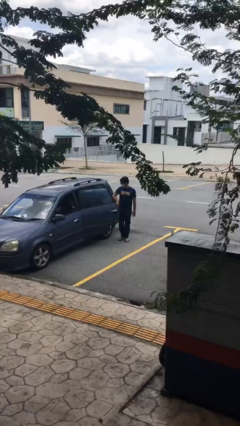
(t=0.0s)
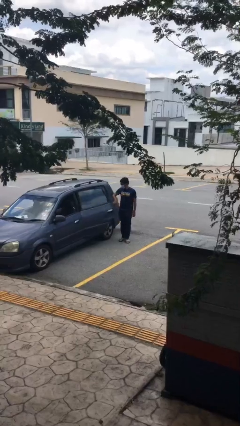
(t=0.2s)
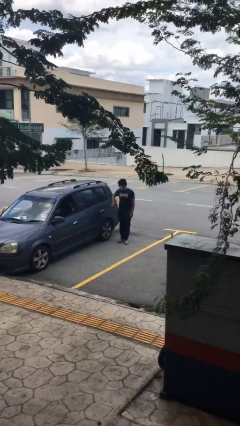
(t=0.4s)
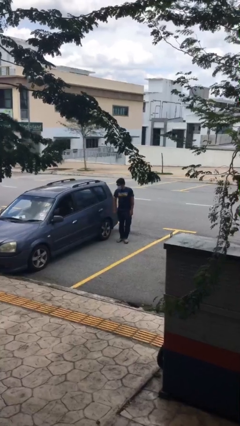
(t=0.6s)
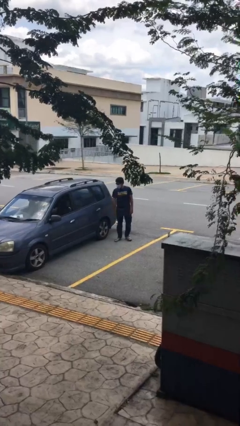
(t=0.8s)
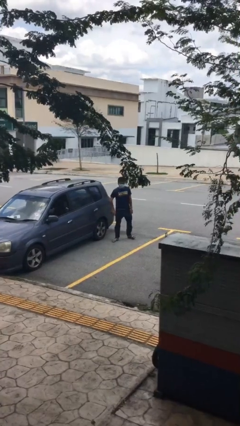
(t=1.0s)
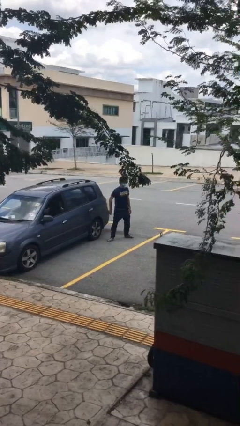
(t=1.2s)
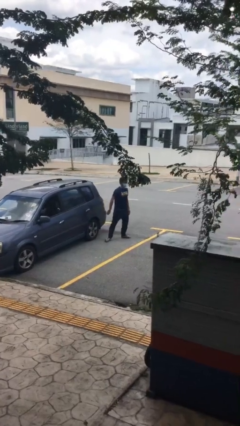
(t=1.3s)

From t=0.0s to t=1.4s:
person closes car door

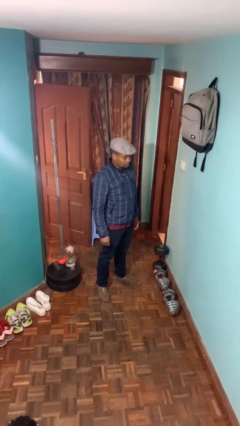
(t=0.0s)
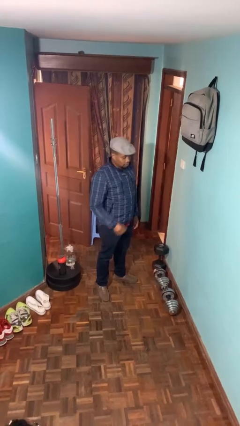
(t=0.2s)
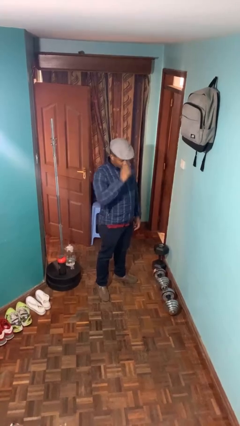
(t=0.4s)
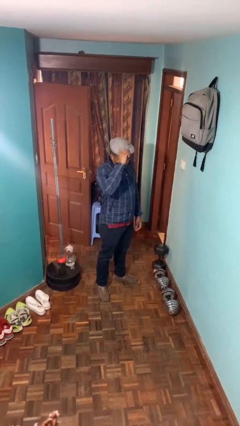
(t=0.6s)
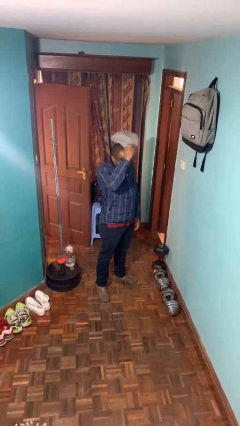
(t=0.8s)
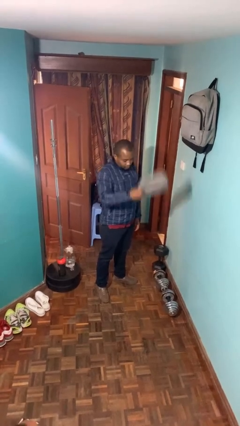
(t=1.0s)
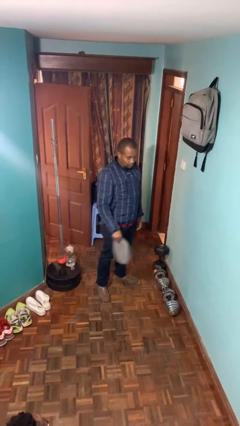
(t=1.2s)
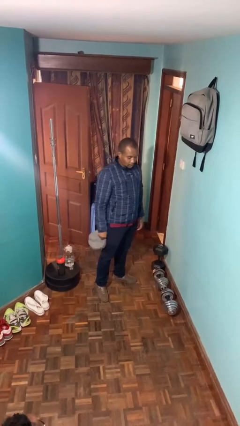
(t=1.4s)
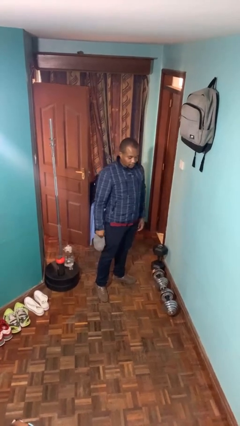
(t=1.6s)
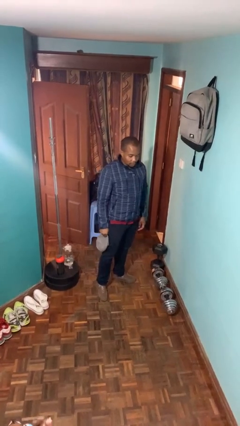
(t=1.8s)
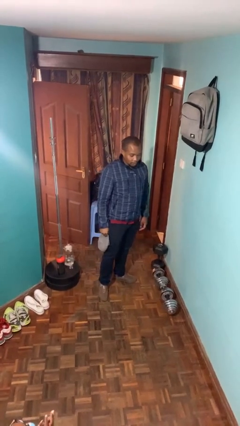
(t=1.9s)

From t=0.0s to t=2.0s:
person takes off hat

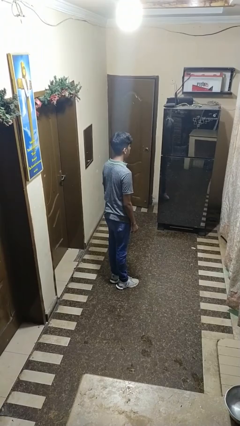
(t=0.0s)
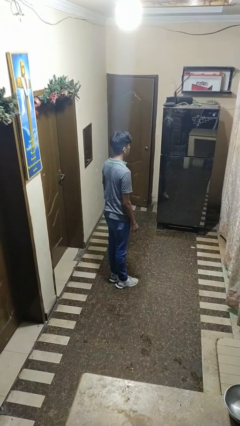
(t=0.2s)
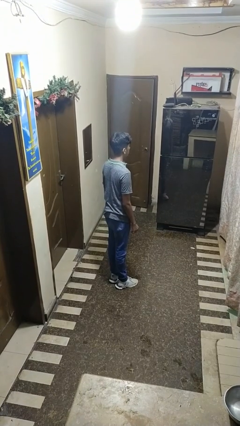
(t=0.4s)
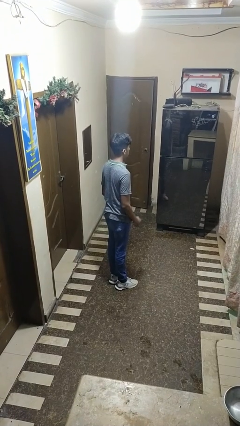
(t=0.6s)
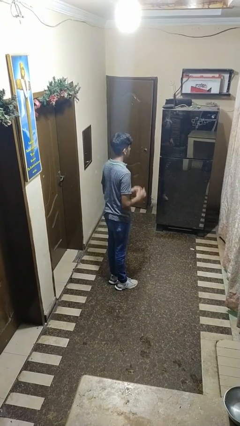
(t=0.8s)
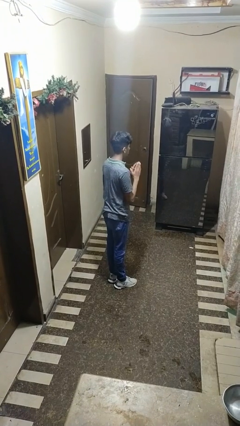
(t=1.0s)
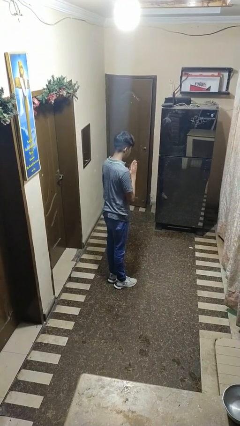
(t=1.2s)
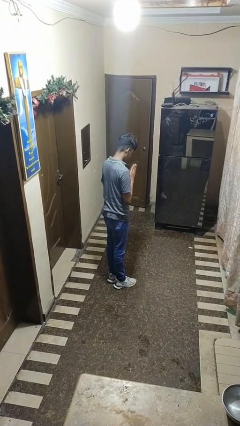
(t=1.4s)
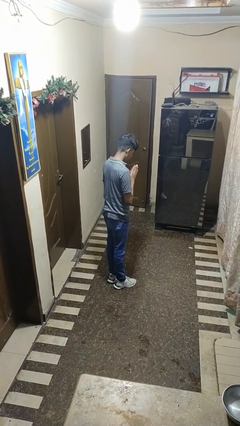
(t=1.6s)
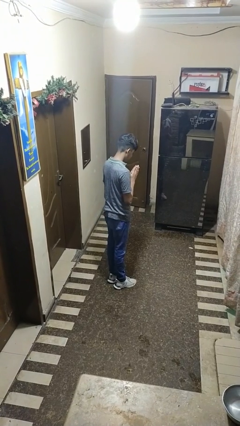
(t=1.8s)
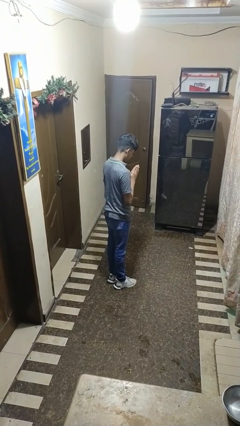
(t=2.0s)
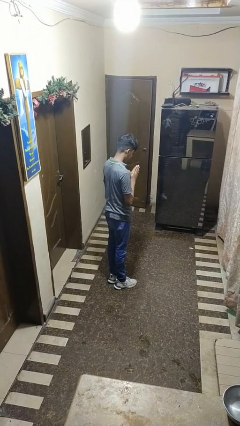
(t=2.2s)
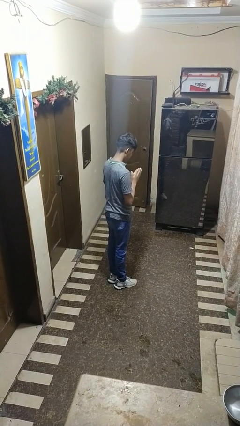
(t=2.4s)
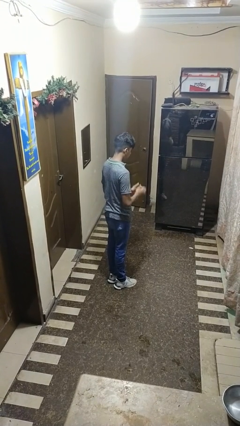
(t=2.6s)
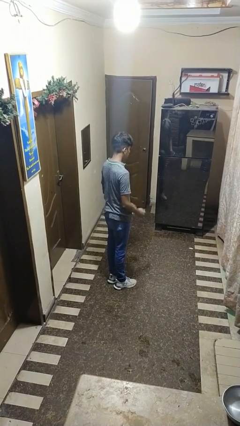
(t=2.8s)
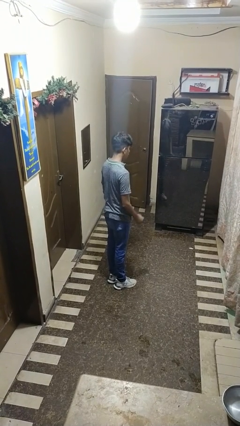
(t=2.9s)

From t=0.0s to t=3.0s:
person prays

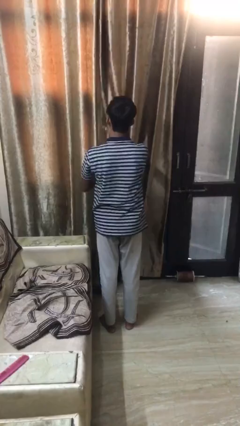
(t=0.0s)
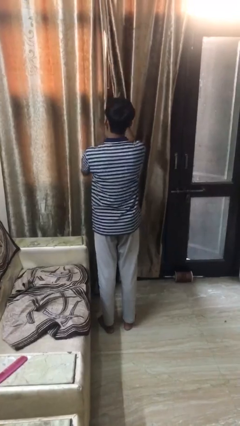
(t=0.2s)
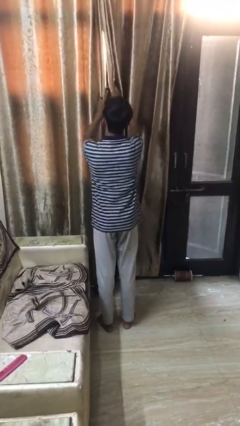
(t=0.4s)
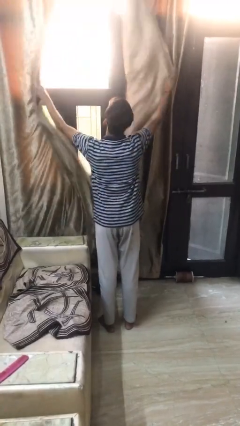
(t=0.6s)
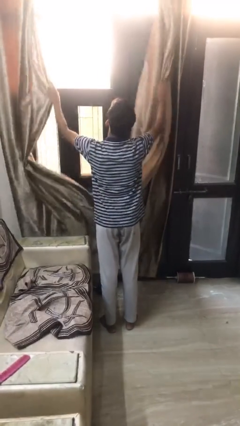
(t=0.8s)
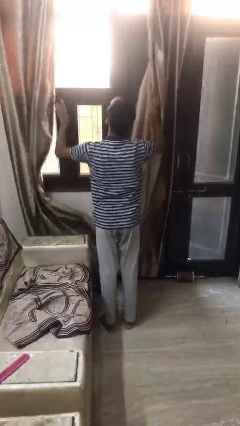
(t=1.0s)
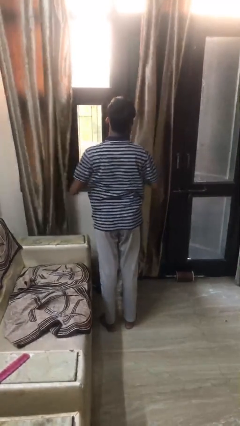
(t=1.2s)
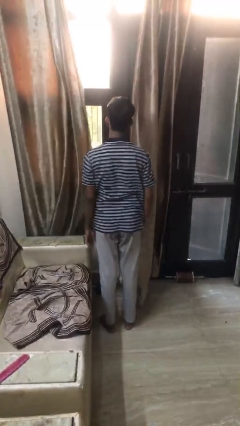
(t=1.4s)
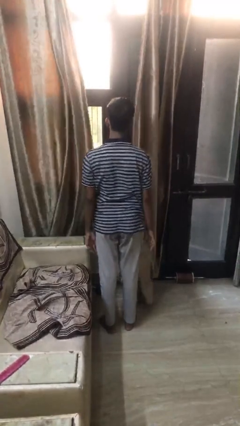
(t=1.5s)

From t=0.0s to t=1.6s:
person opens curtains

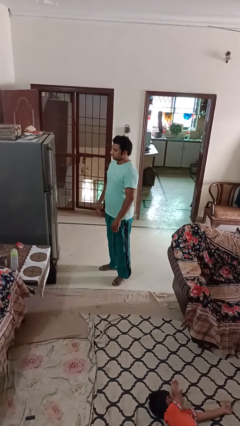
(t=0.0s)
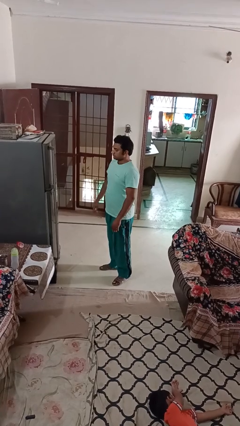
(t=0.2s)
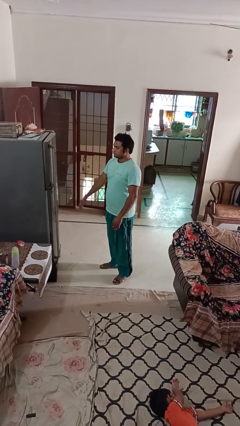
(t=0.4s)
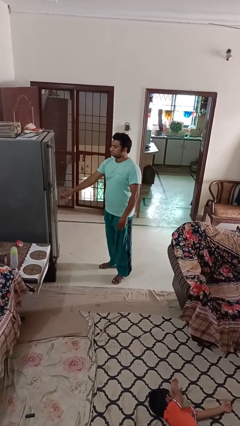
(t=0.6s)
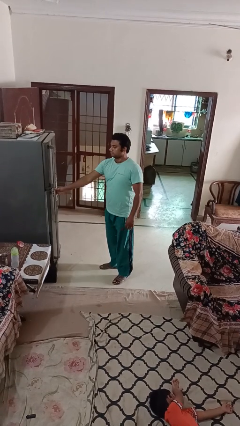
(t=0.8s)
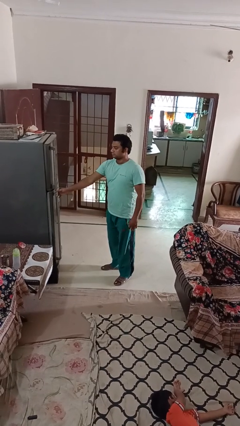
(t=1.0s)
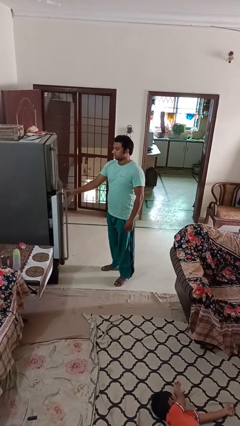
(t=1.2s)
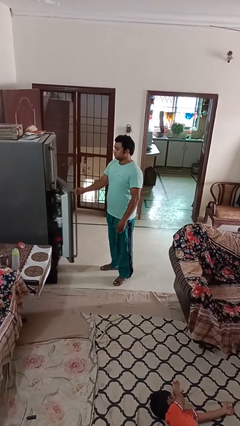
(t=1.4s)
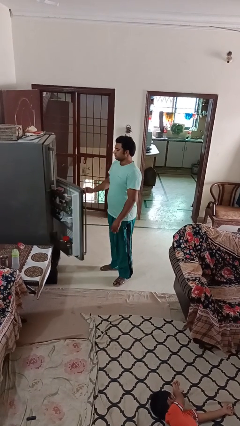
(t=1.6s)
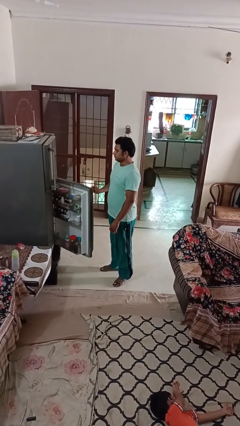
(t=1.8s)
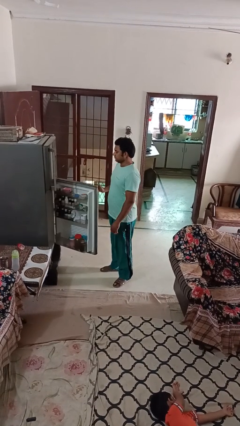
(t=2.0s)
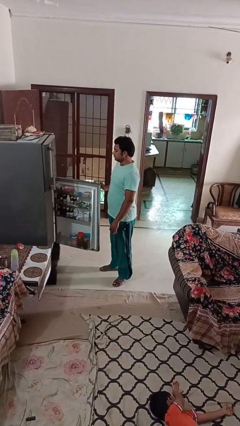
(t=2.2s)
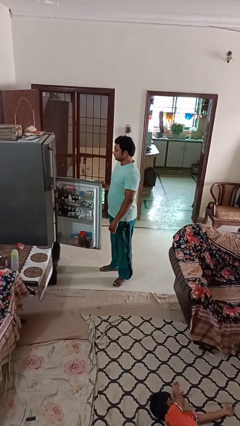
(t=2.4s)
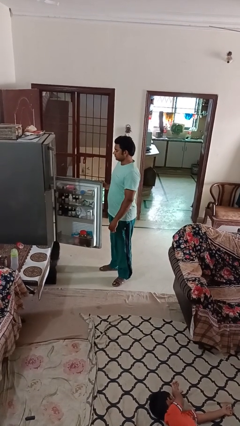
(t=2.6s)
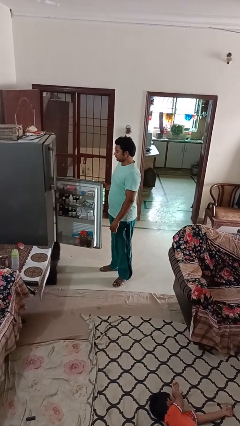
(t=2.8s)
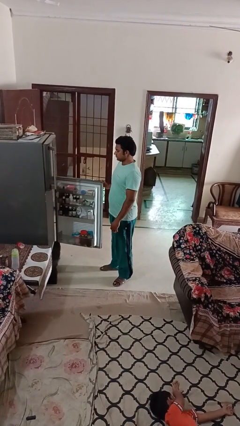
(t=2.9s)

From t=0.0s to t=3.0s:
person opens refrigerator

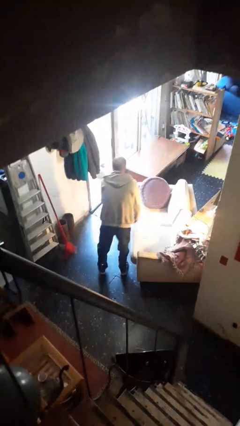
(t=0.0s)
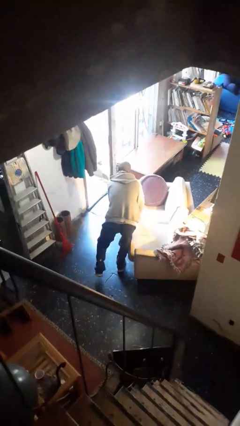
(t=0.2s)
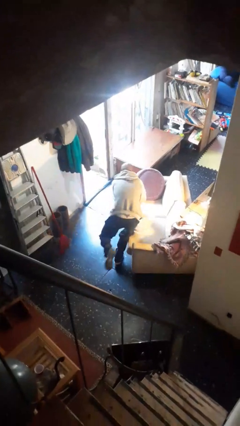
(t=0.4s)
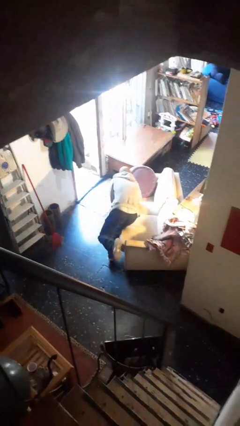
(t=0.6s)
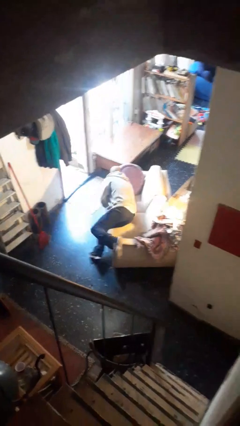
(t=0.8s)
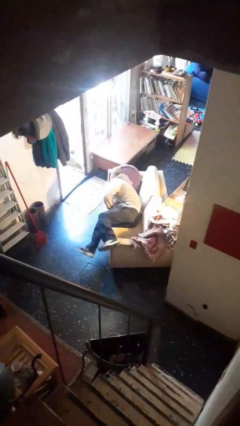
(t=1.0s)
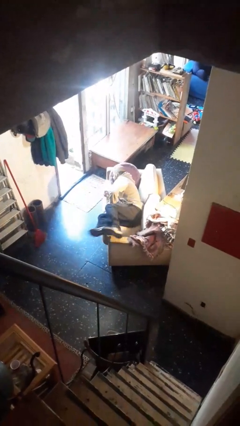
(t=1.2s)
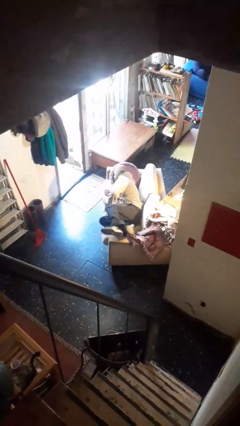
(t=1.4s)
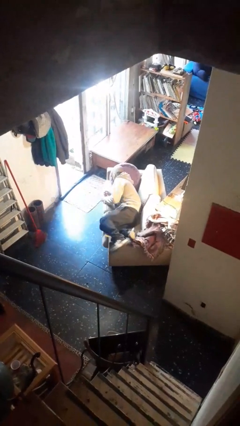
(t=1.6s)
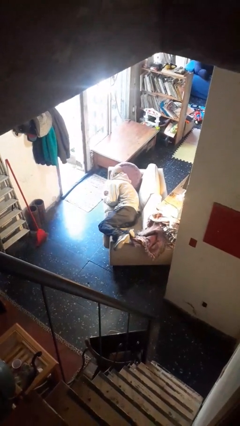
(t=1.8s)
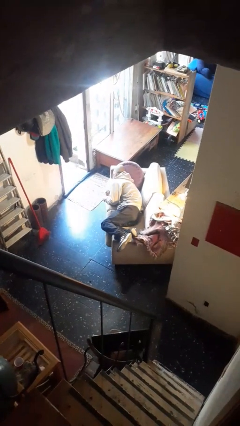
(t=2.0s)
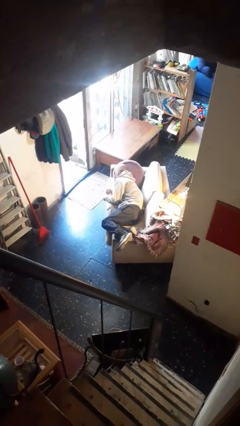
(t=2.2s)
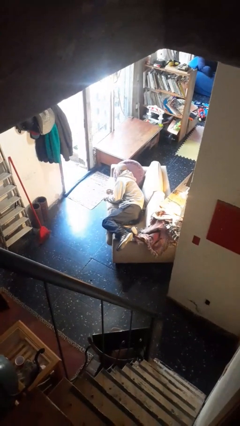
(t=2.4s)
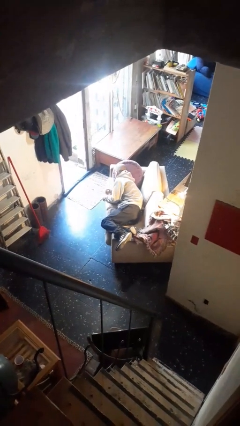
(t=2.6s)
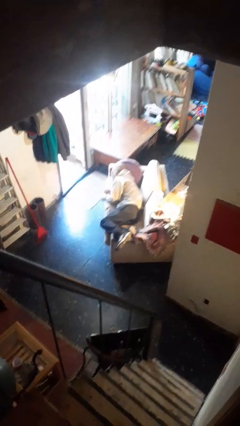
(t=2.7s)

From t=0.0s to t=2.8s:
person lies down on couch

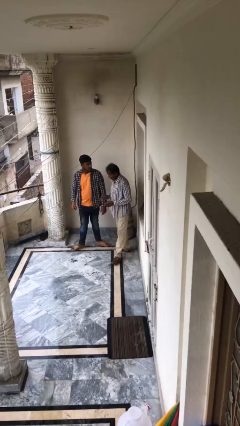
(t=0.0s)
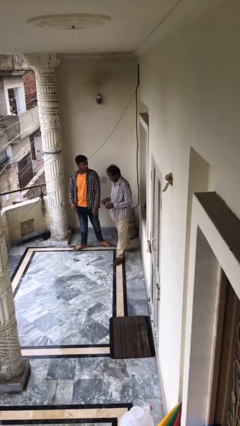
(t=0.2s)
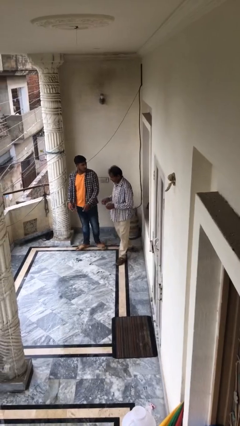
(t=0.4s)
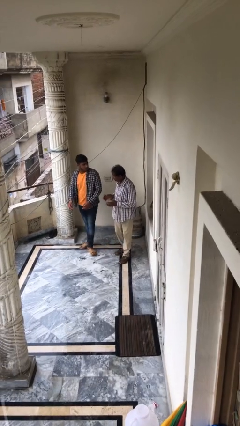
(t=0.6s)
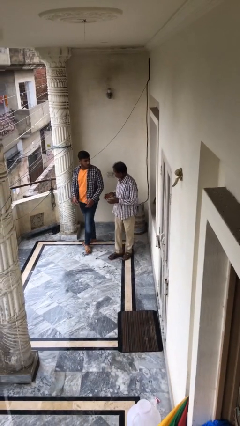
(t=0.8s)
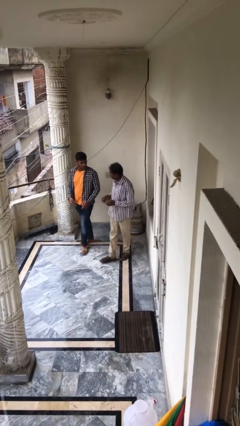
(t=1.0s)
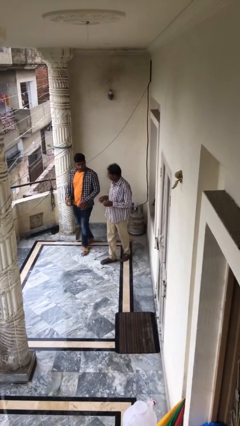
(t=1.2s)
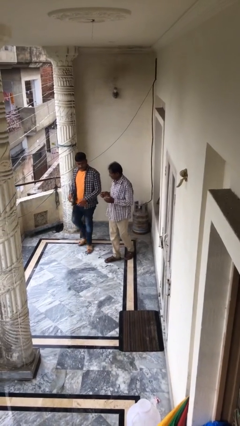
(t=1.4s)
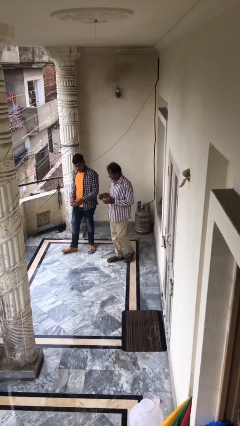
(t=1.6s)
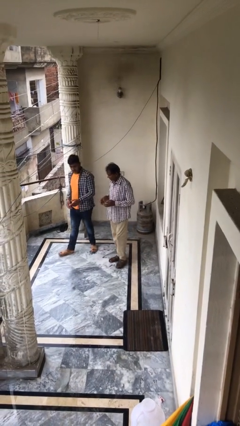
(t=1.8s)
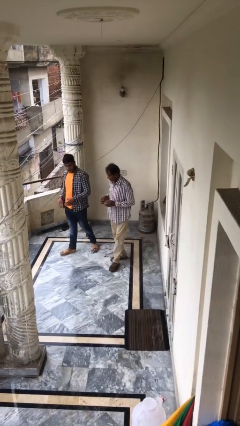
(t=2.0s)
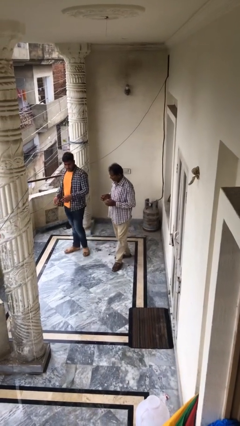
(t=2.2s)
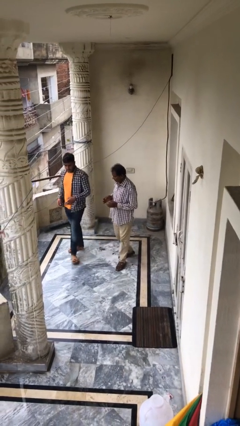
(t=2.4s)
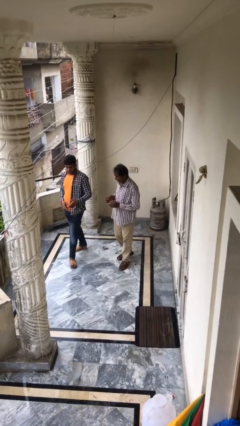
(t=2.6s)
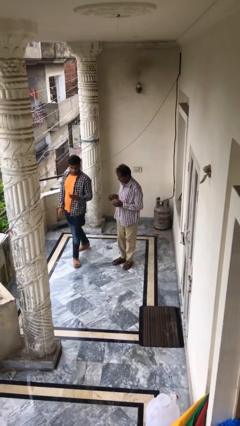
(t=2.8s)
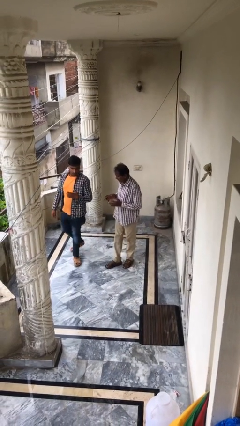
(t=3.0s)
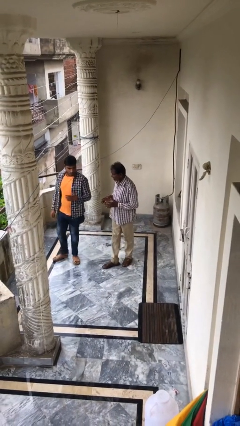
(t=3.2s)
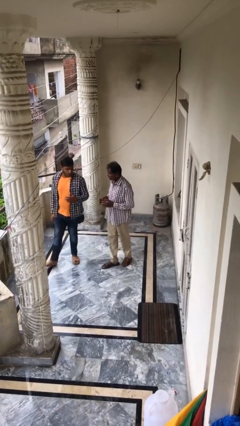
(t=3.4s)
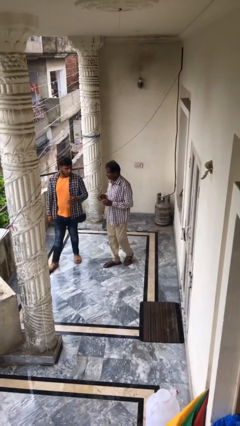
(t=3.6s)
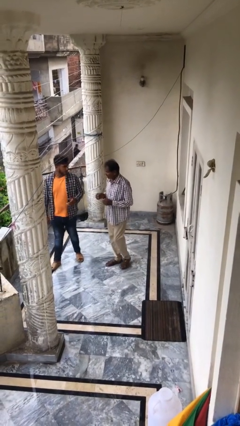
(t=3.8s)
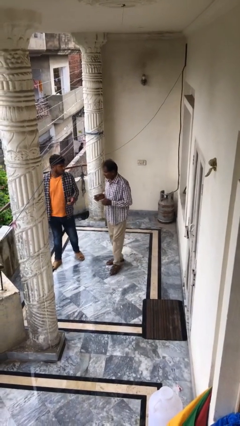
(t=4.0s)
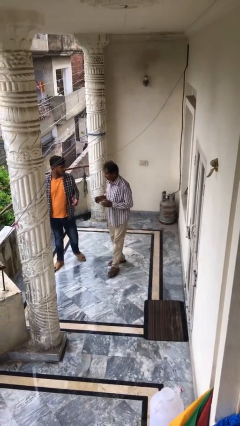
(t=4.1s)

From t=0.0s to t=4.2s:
person talks to person
